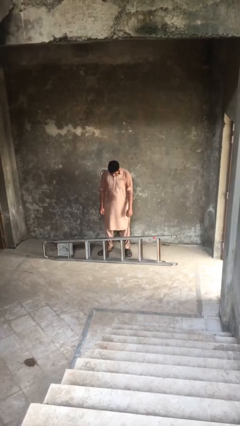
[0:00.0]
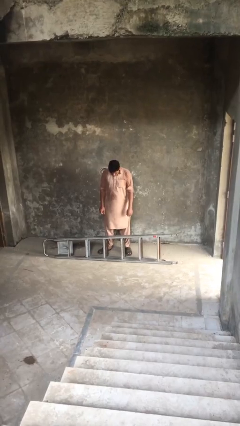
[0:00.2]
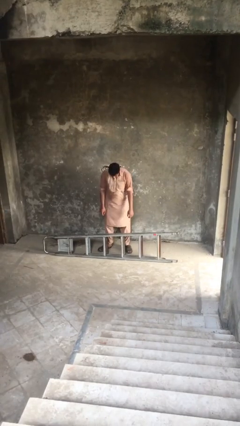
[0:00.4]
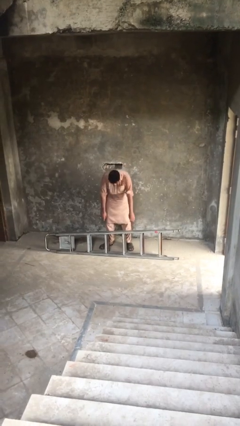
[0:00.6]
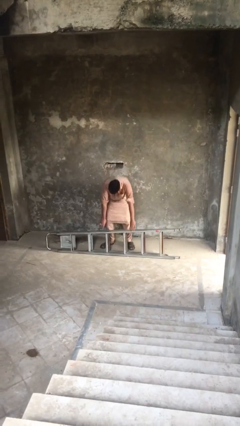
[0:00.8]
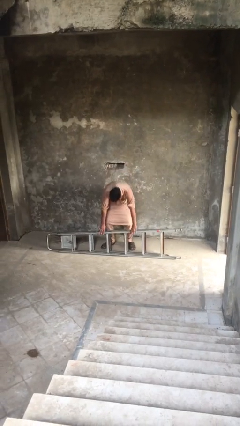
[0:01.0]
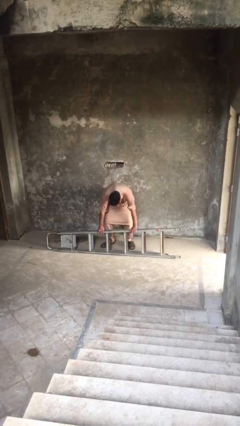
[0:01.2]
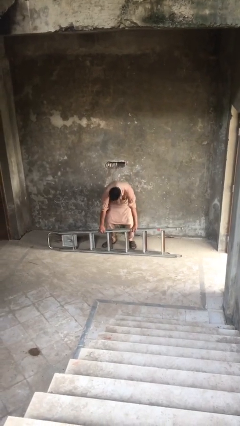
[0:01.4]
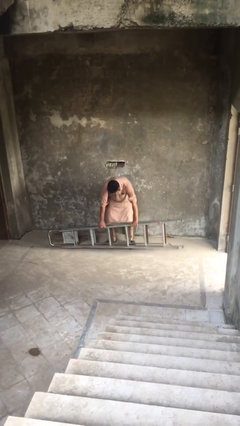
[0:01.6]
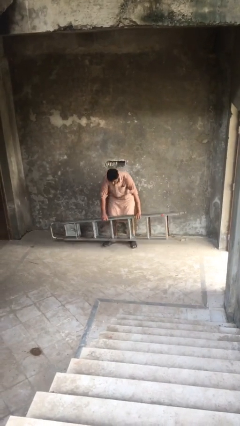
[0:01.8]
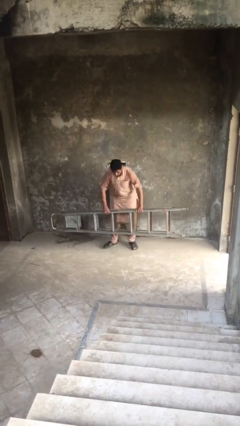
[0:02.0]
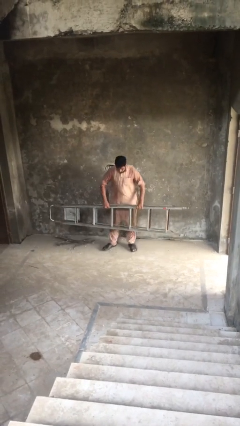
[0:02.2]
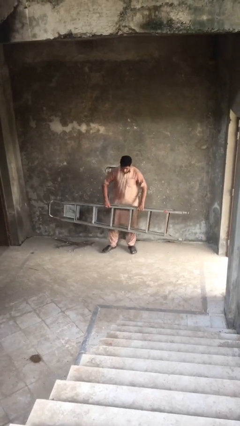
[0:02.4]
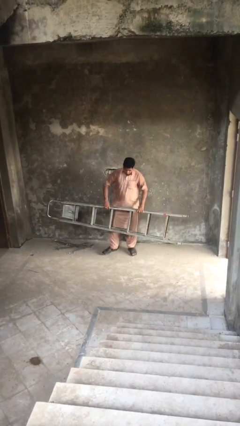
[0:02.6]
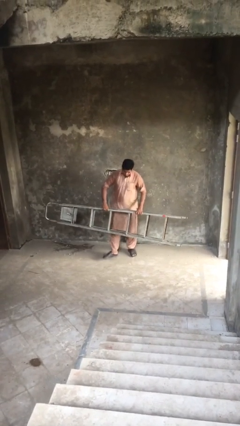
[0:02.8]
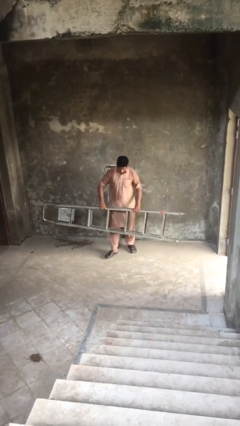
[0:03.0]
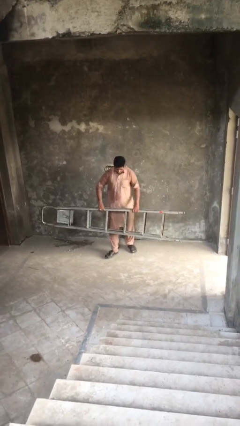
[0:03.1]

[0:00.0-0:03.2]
person picks up object from floor

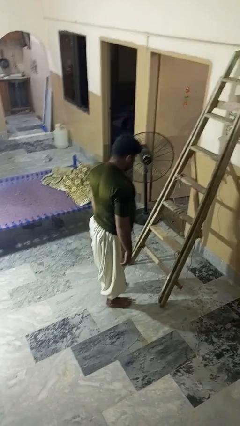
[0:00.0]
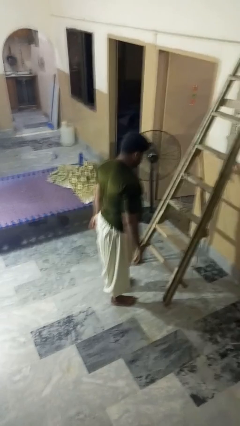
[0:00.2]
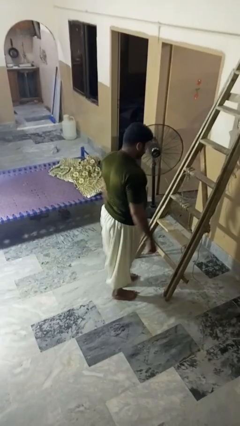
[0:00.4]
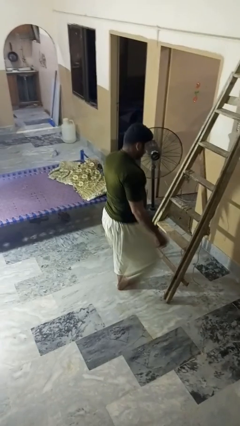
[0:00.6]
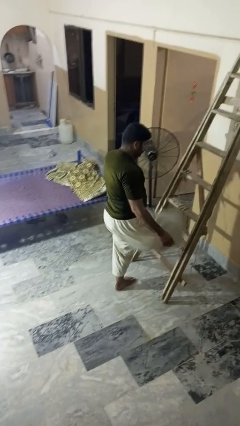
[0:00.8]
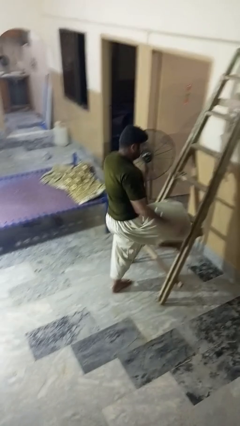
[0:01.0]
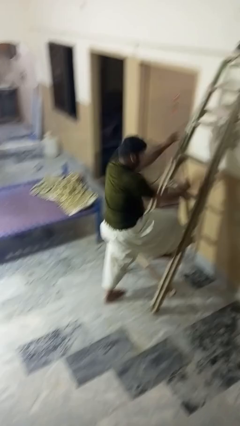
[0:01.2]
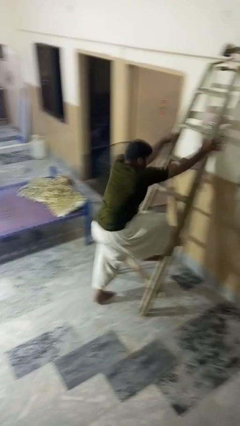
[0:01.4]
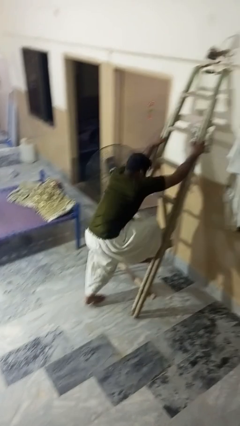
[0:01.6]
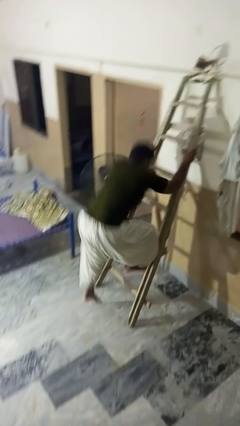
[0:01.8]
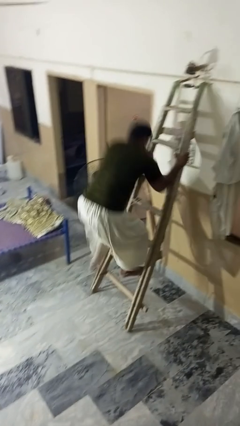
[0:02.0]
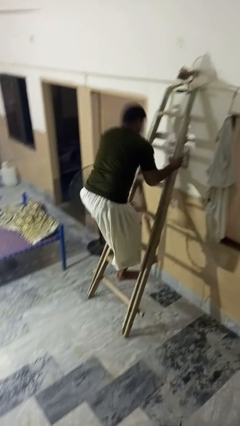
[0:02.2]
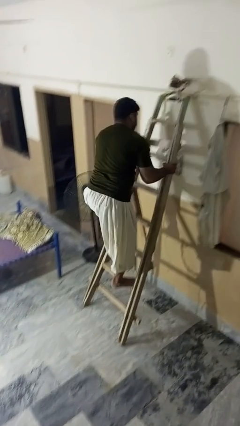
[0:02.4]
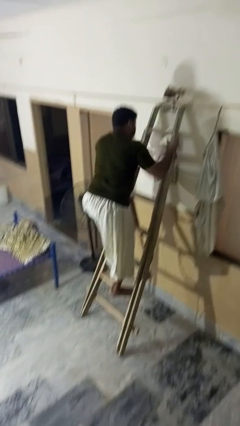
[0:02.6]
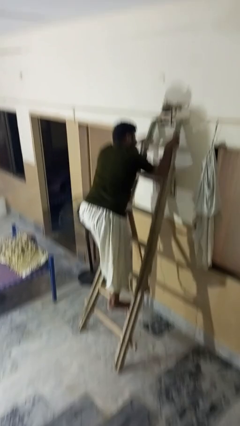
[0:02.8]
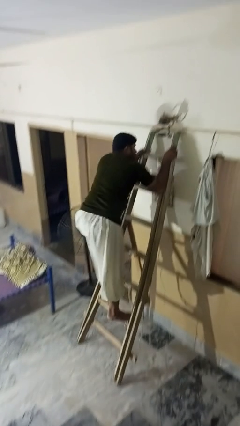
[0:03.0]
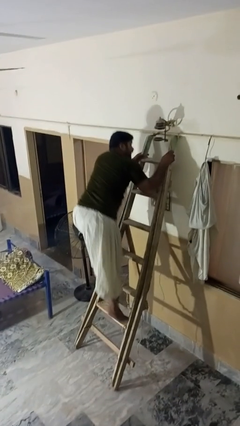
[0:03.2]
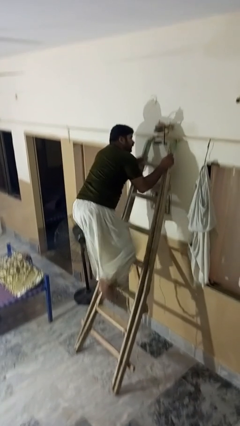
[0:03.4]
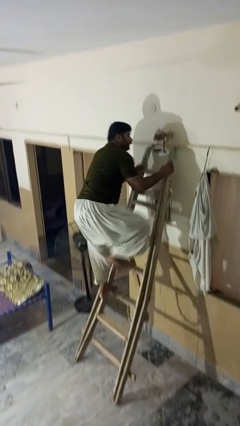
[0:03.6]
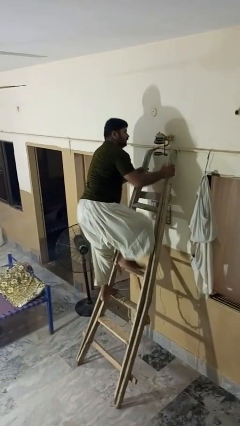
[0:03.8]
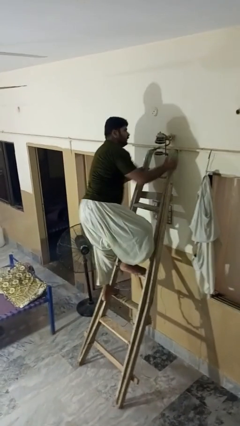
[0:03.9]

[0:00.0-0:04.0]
person climbs up ladder

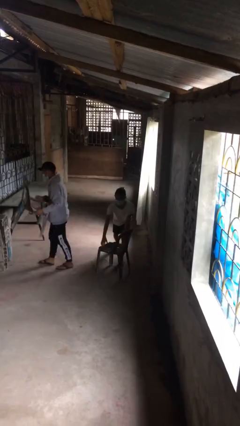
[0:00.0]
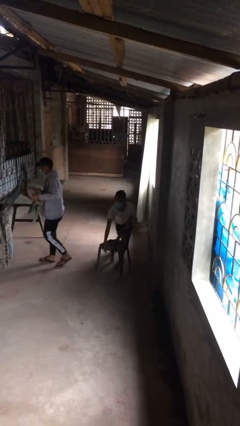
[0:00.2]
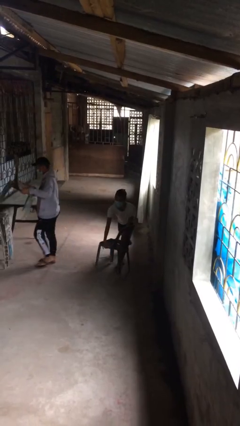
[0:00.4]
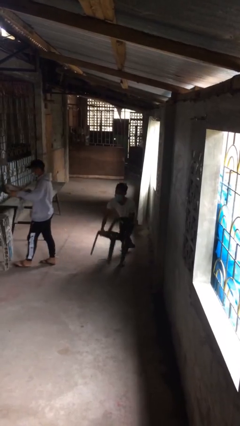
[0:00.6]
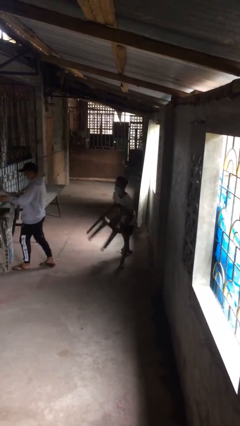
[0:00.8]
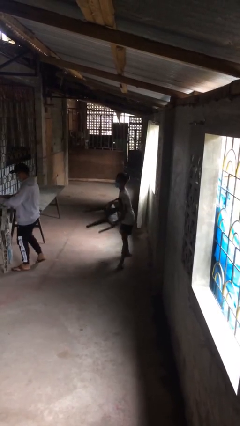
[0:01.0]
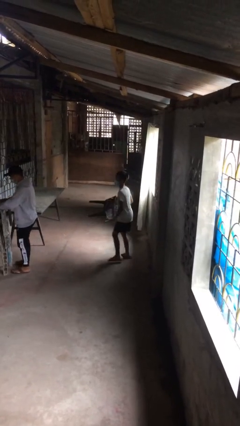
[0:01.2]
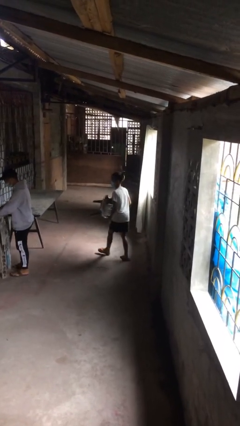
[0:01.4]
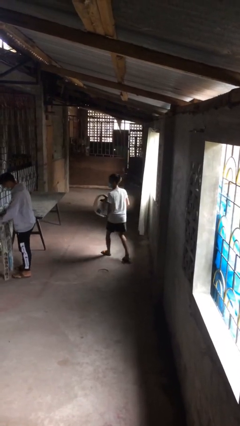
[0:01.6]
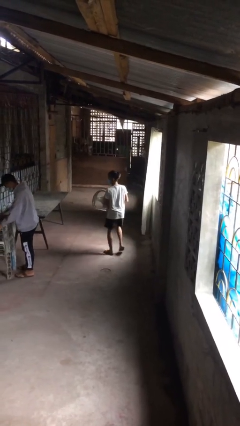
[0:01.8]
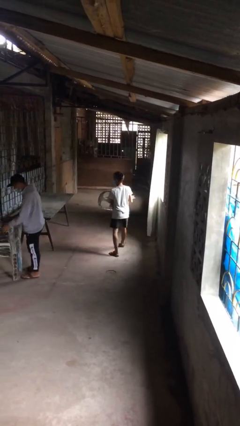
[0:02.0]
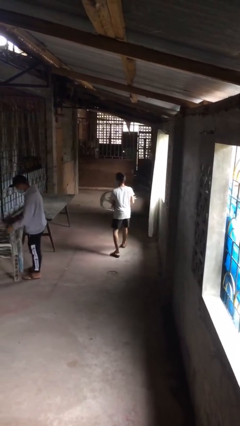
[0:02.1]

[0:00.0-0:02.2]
person steals object from person

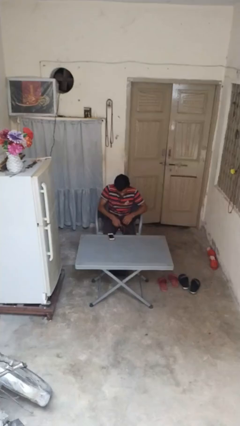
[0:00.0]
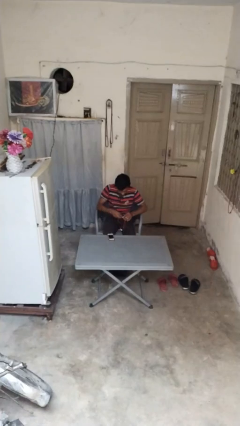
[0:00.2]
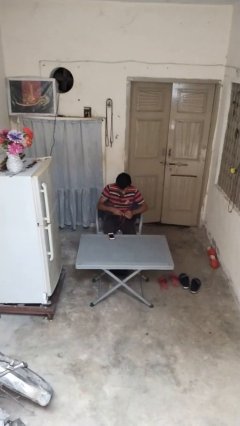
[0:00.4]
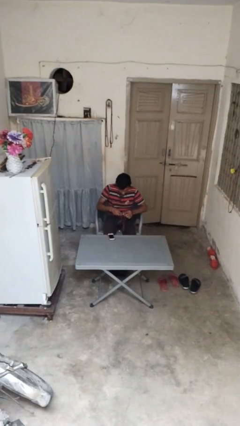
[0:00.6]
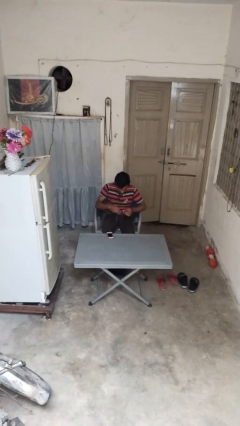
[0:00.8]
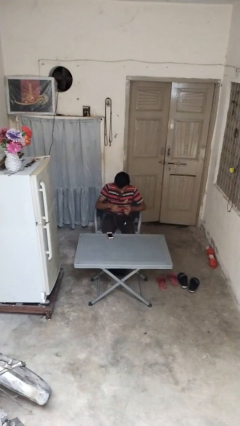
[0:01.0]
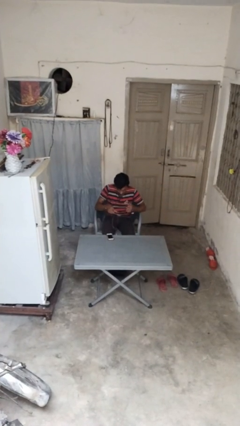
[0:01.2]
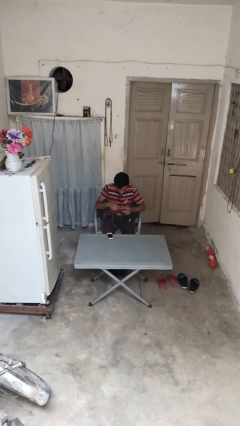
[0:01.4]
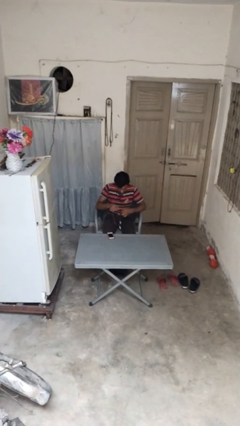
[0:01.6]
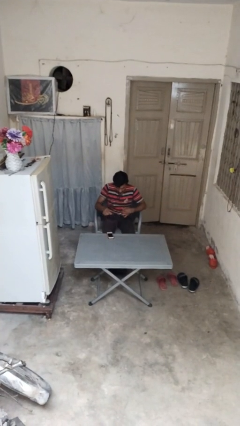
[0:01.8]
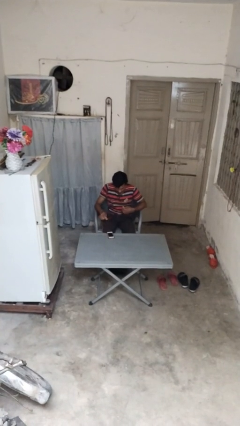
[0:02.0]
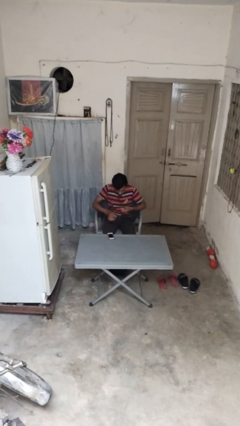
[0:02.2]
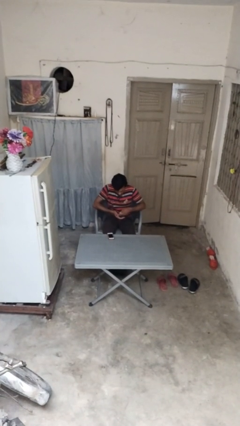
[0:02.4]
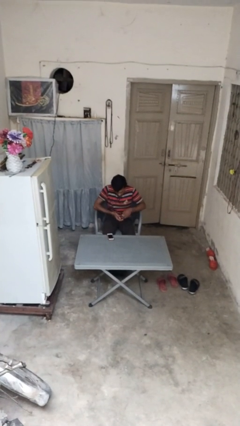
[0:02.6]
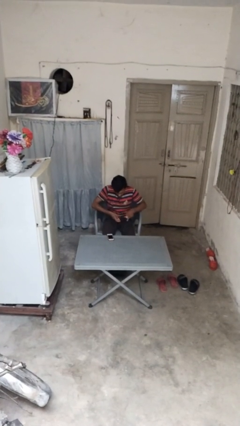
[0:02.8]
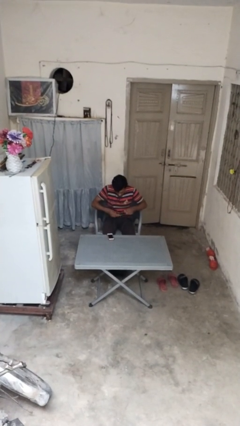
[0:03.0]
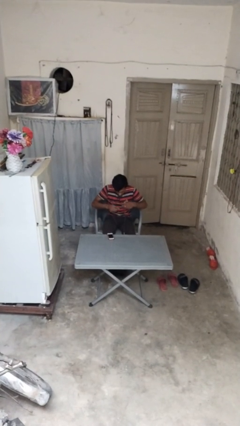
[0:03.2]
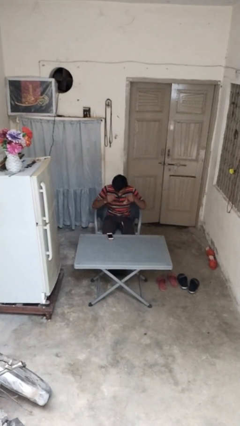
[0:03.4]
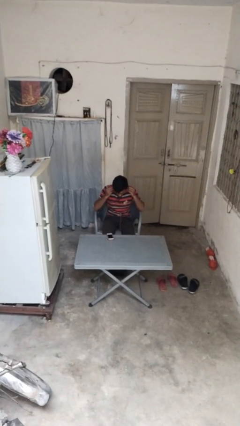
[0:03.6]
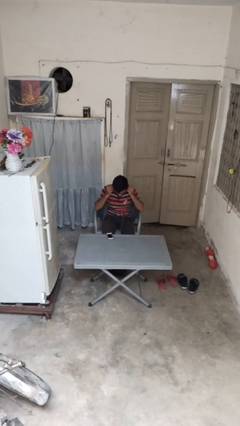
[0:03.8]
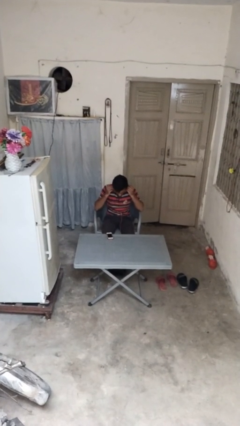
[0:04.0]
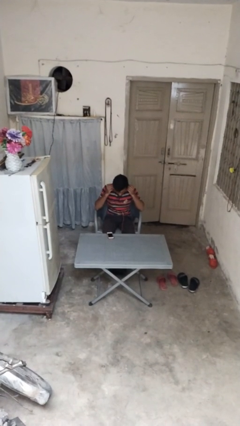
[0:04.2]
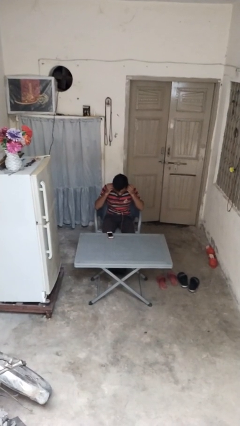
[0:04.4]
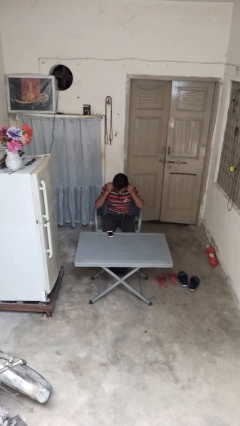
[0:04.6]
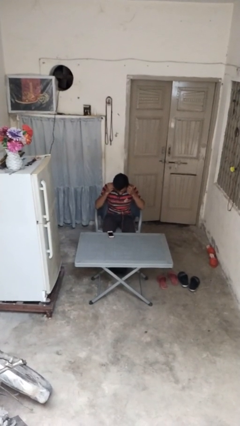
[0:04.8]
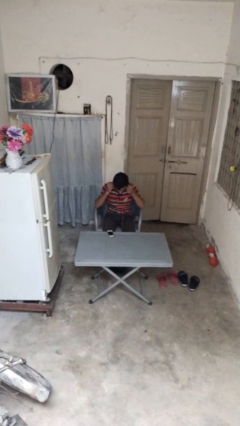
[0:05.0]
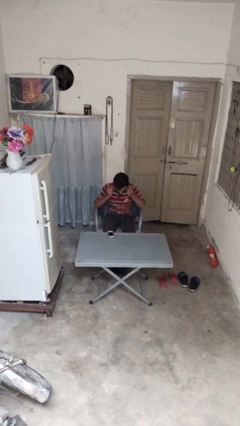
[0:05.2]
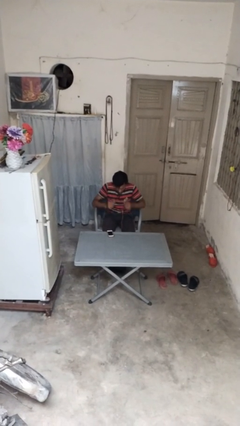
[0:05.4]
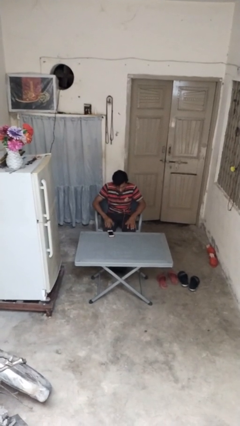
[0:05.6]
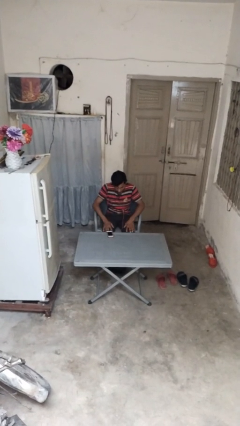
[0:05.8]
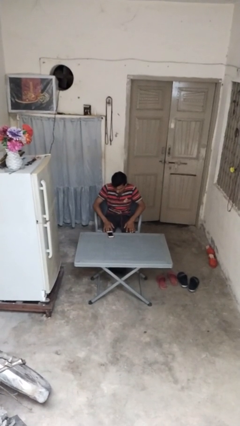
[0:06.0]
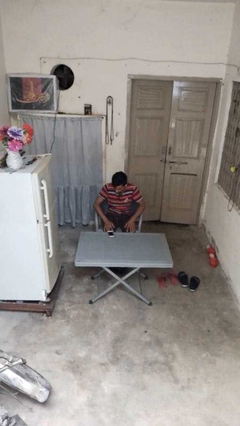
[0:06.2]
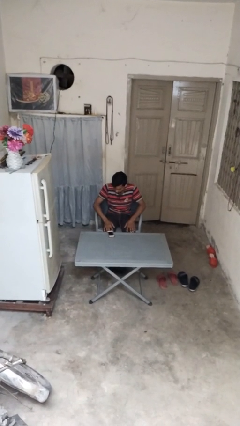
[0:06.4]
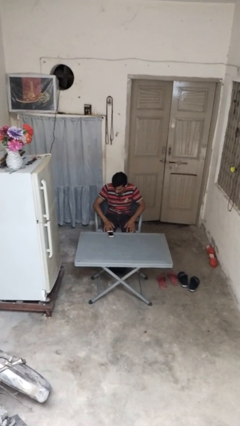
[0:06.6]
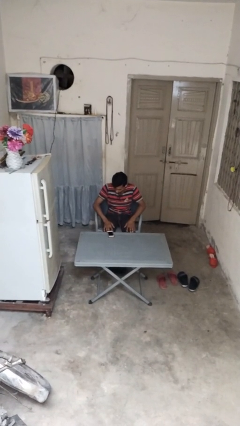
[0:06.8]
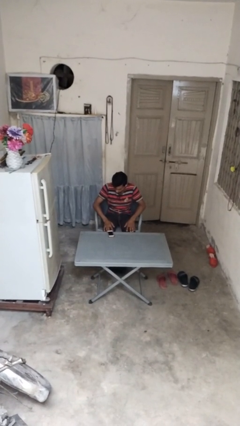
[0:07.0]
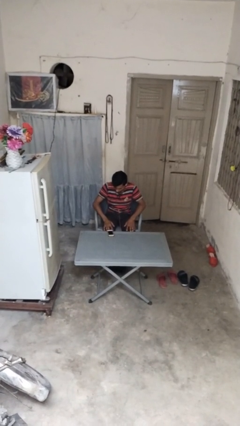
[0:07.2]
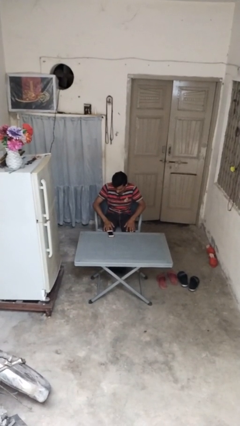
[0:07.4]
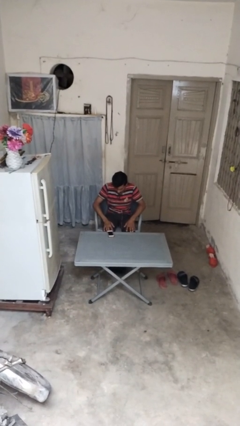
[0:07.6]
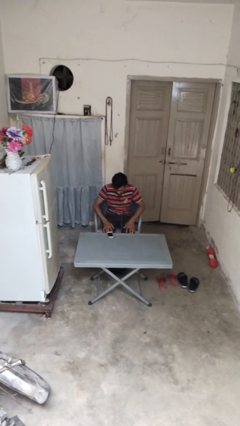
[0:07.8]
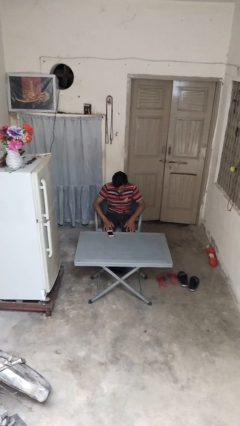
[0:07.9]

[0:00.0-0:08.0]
person puts on headphones

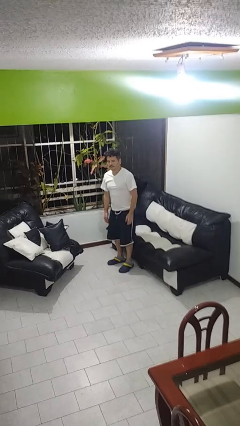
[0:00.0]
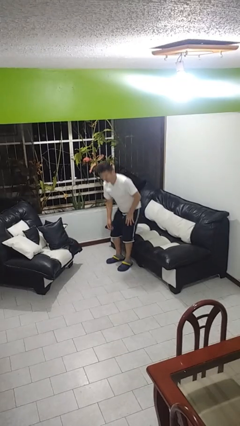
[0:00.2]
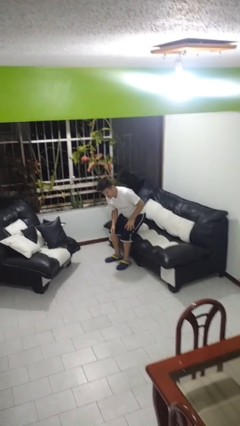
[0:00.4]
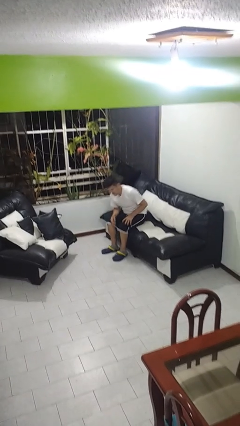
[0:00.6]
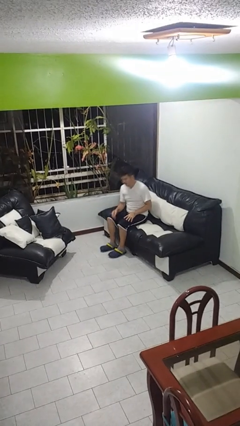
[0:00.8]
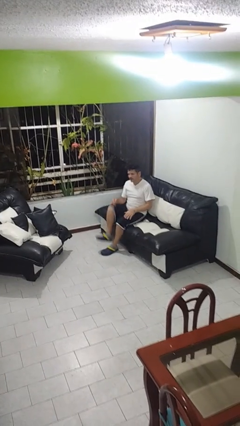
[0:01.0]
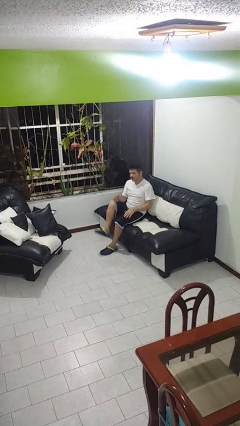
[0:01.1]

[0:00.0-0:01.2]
person lies down on couch
